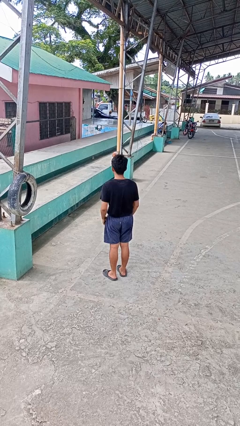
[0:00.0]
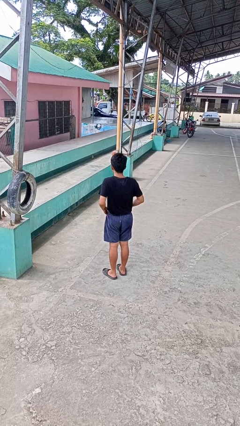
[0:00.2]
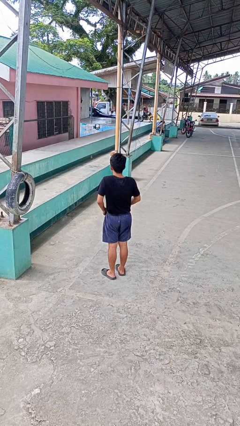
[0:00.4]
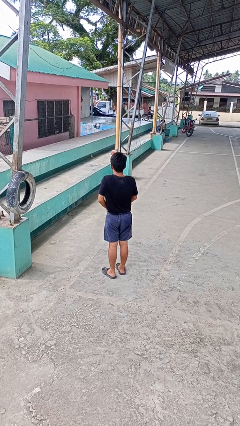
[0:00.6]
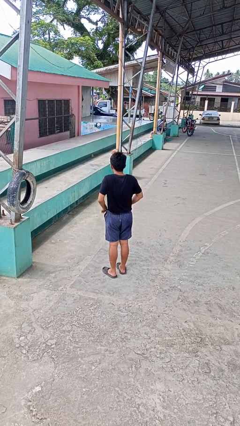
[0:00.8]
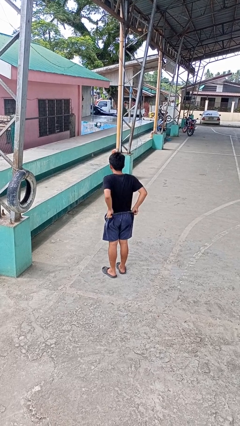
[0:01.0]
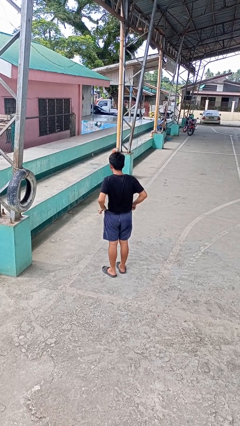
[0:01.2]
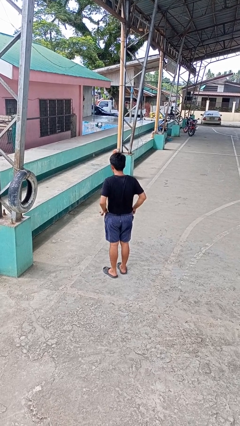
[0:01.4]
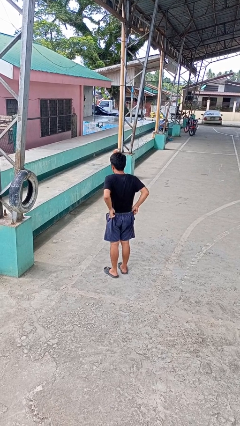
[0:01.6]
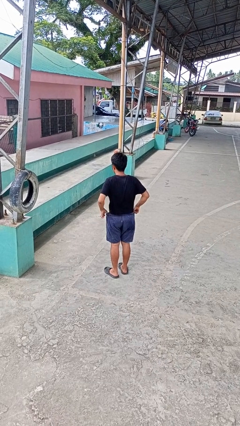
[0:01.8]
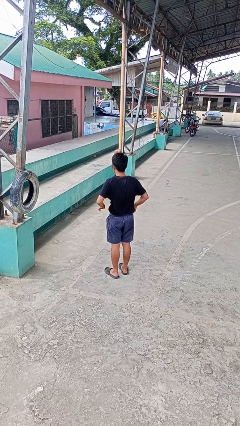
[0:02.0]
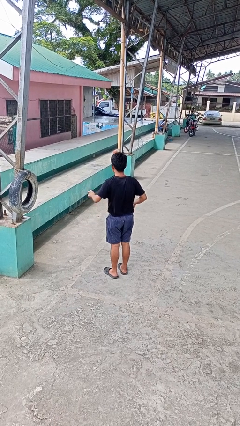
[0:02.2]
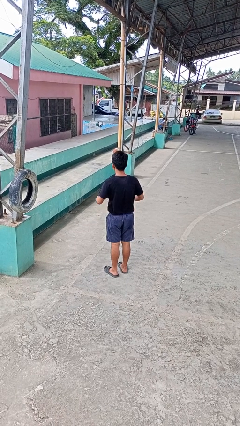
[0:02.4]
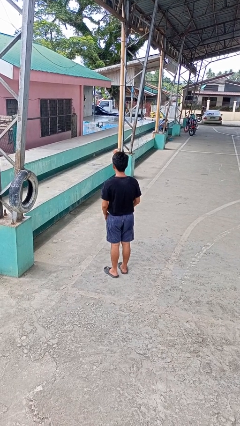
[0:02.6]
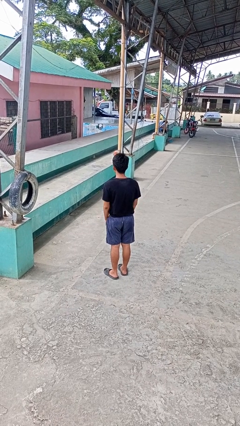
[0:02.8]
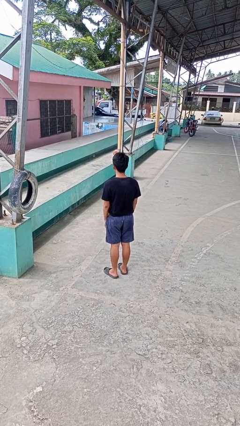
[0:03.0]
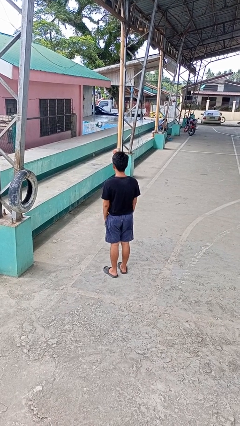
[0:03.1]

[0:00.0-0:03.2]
person hikes up pants

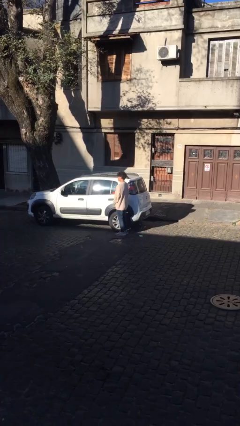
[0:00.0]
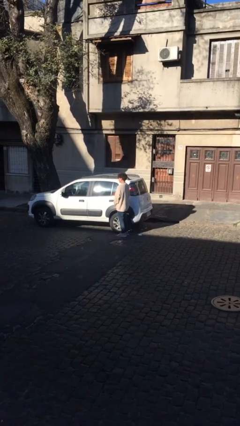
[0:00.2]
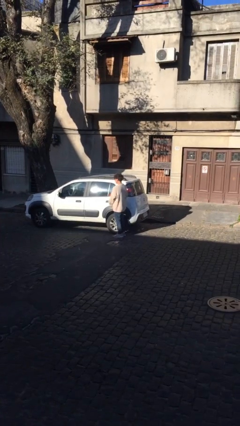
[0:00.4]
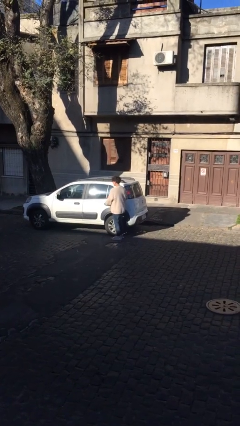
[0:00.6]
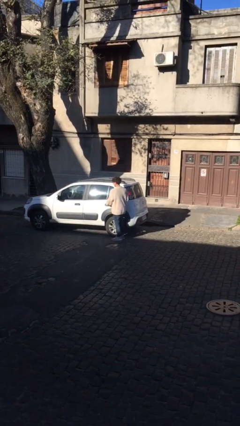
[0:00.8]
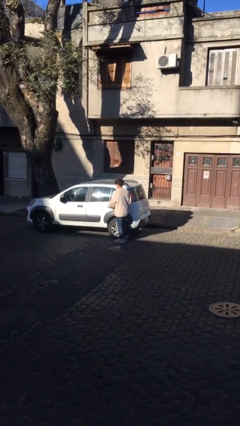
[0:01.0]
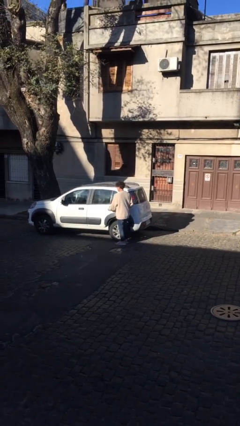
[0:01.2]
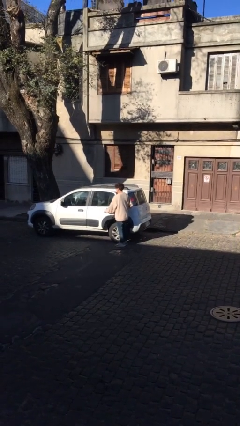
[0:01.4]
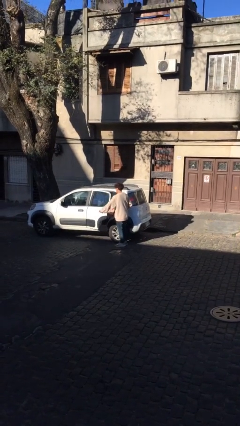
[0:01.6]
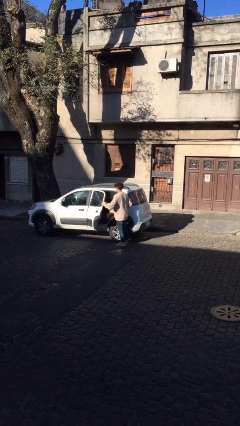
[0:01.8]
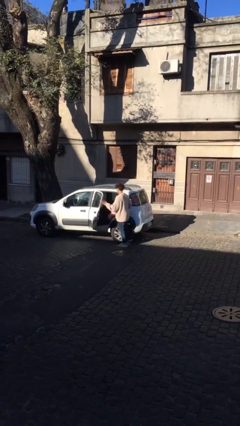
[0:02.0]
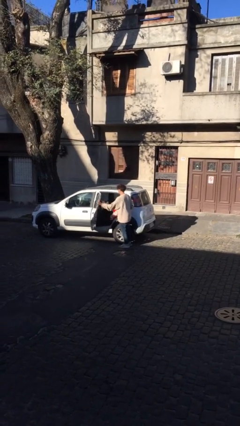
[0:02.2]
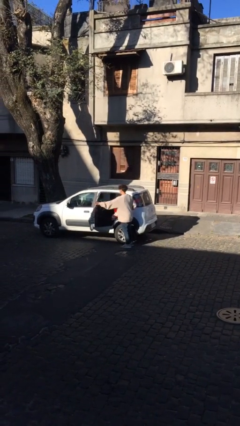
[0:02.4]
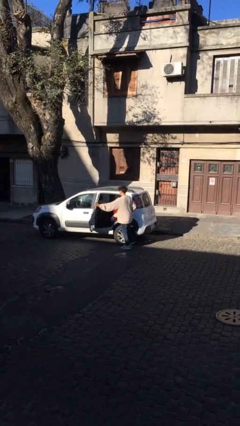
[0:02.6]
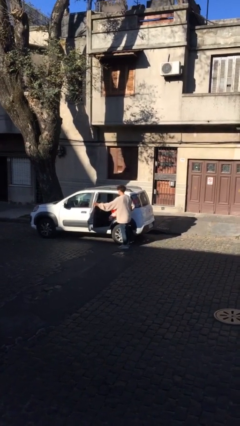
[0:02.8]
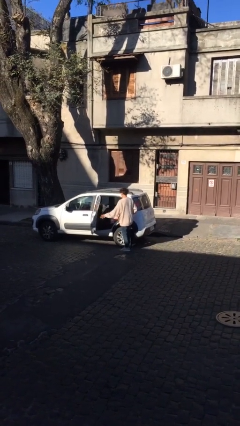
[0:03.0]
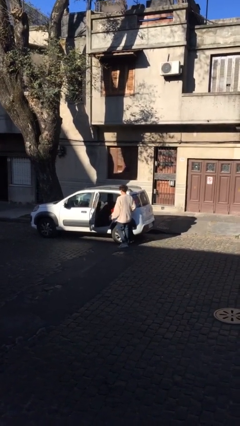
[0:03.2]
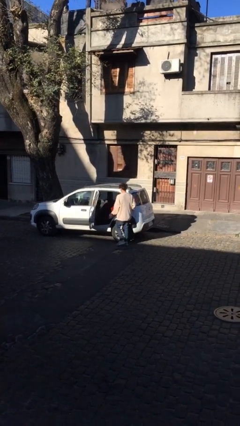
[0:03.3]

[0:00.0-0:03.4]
person opens car door

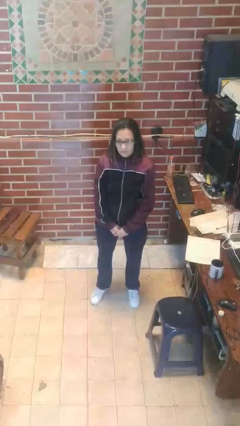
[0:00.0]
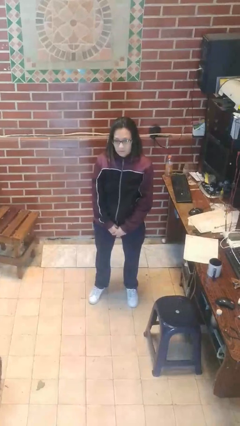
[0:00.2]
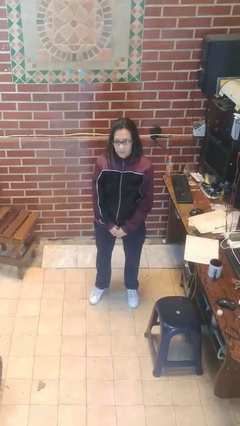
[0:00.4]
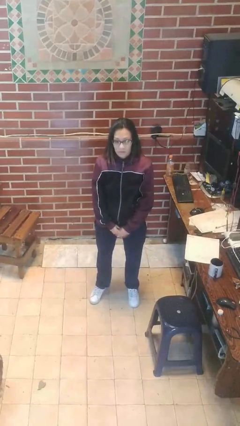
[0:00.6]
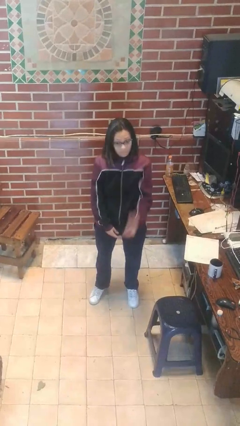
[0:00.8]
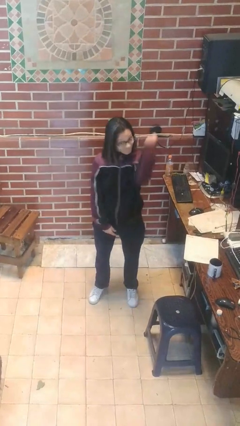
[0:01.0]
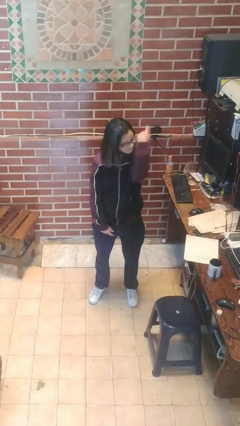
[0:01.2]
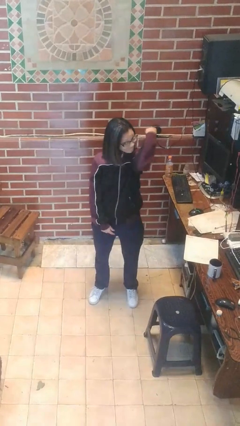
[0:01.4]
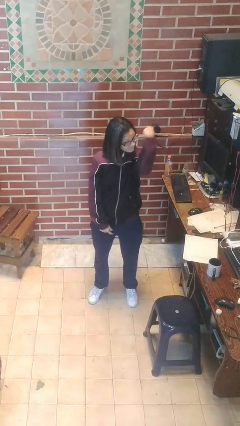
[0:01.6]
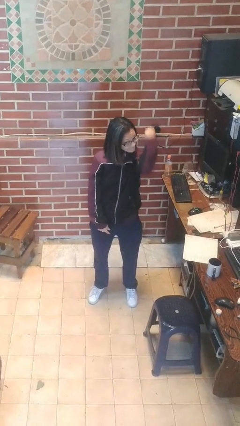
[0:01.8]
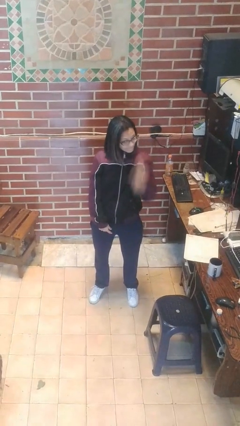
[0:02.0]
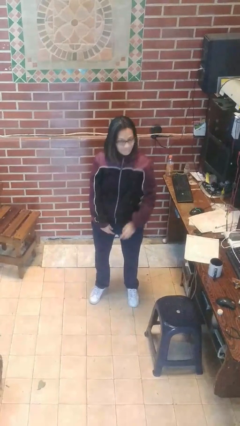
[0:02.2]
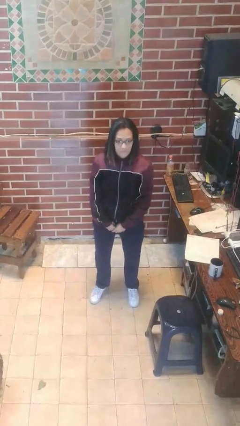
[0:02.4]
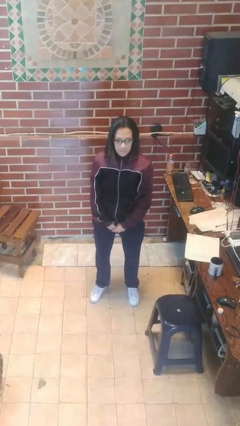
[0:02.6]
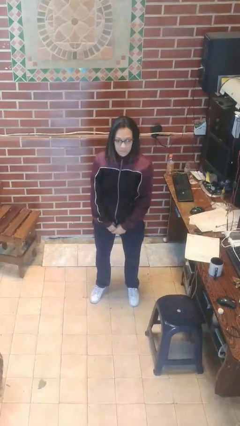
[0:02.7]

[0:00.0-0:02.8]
person gestures behind me

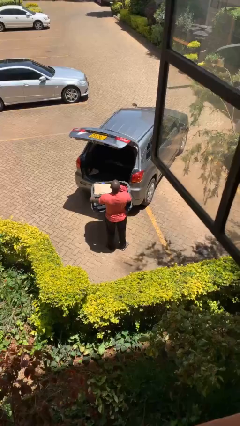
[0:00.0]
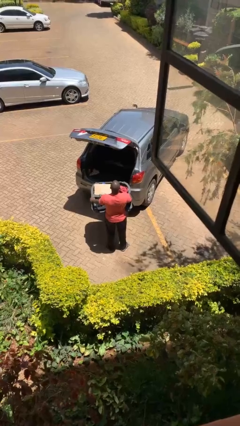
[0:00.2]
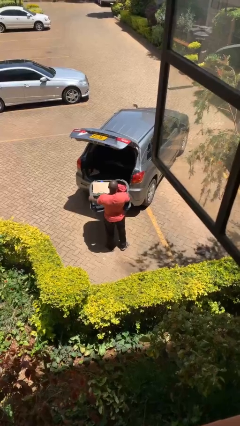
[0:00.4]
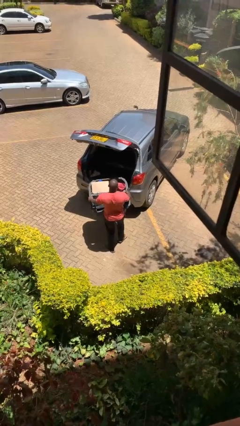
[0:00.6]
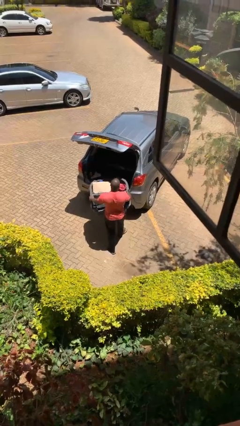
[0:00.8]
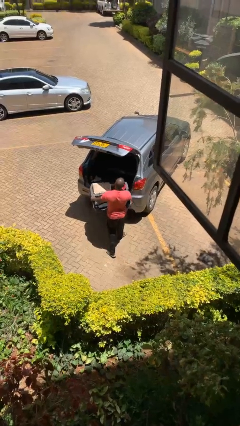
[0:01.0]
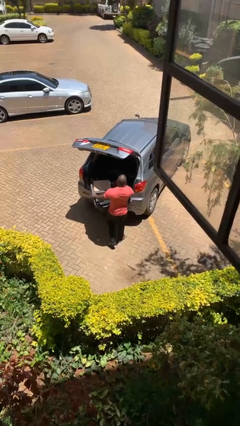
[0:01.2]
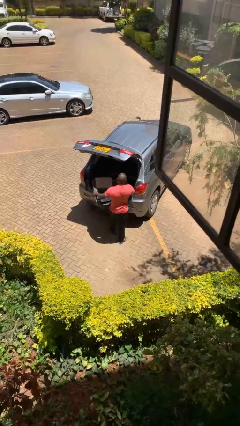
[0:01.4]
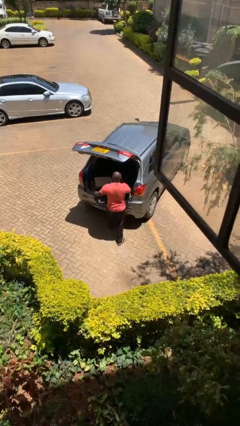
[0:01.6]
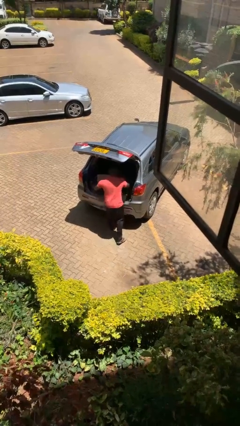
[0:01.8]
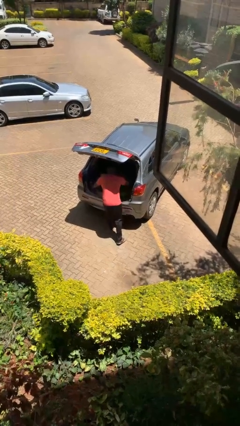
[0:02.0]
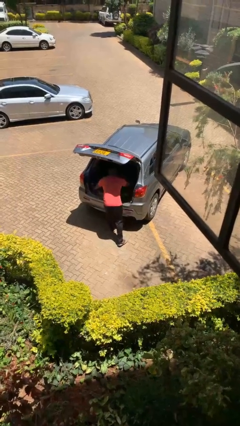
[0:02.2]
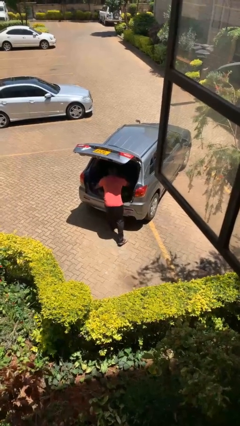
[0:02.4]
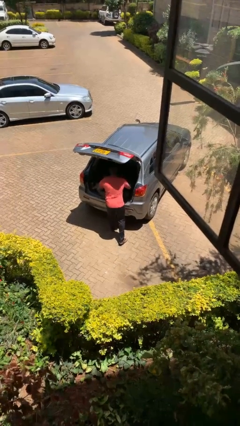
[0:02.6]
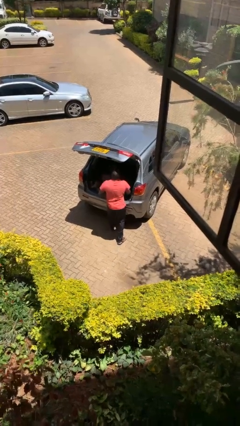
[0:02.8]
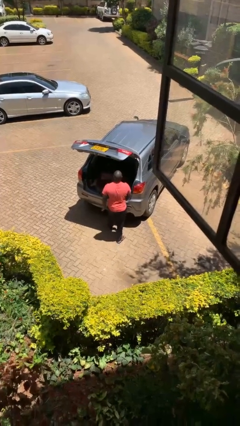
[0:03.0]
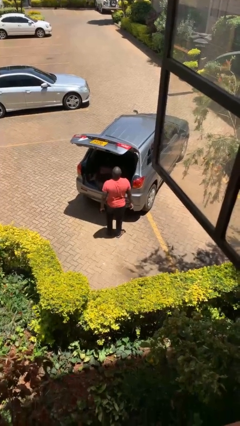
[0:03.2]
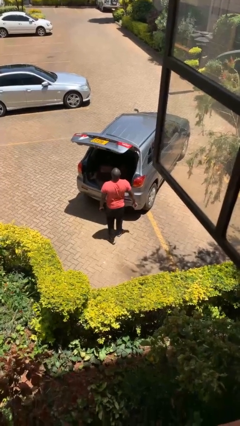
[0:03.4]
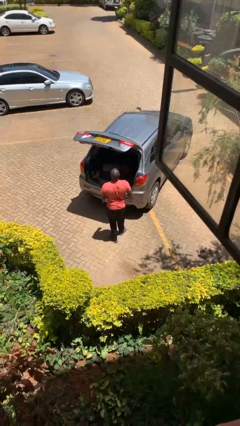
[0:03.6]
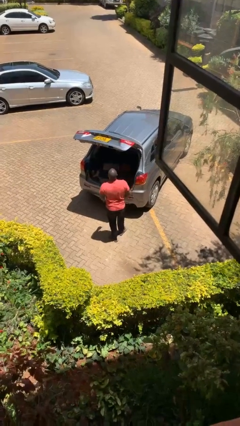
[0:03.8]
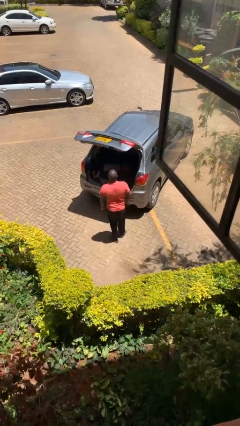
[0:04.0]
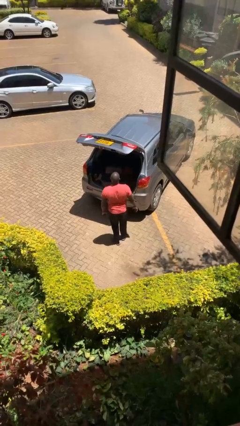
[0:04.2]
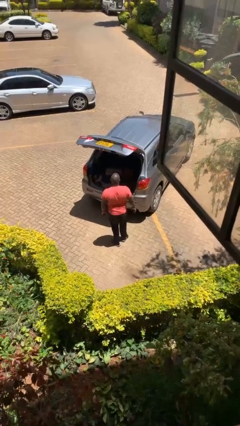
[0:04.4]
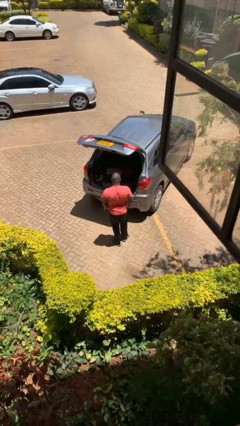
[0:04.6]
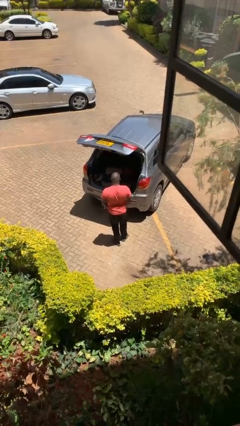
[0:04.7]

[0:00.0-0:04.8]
person loads car

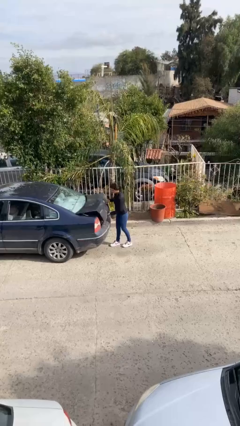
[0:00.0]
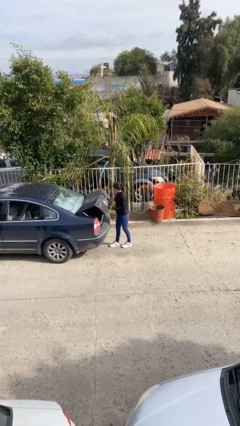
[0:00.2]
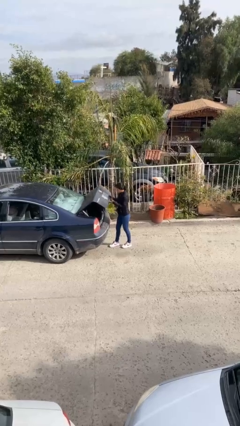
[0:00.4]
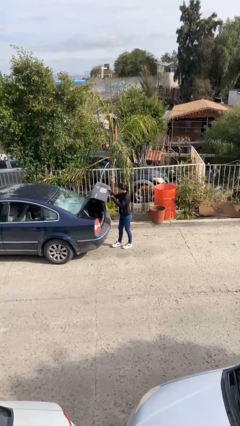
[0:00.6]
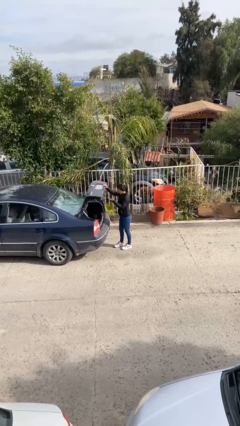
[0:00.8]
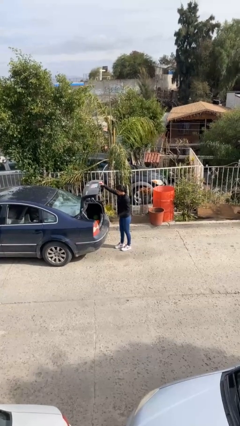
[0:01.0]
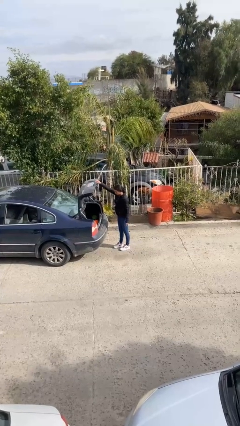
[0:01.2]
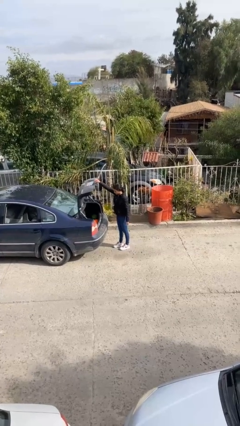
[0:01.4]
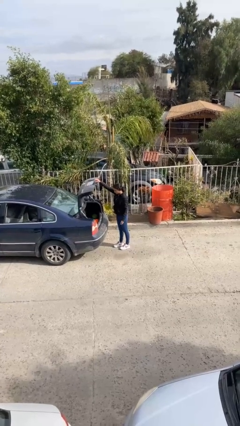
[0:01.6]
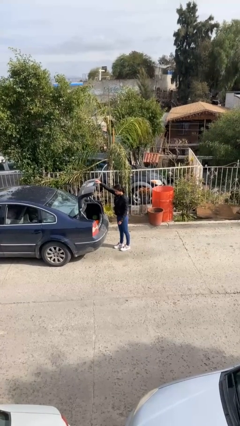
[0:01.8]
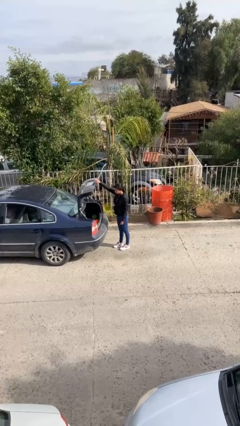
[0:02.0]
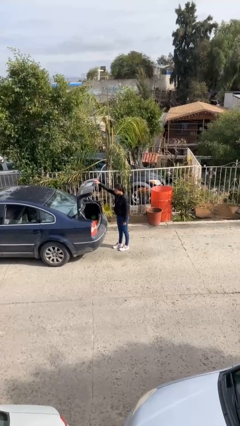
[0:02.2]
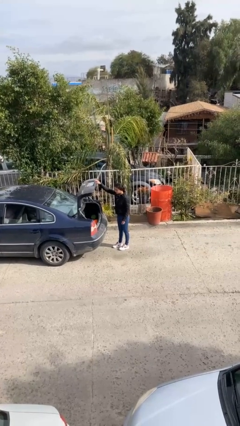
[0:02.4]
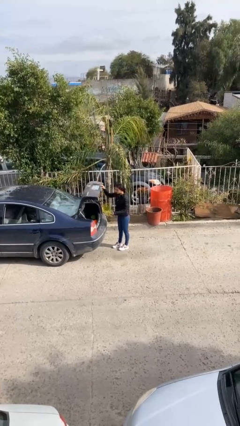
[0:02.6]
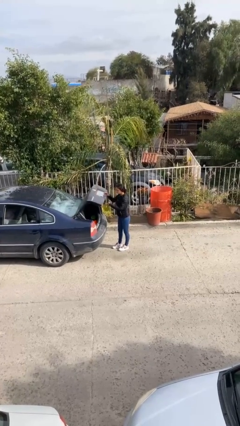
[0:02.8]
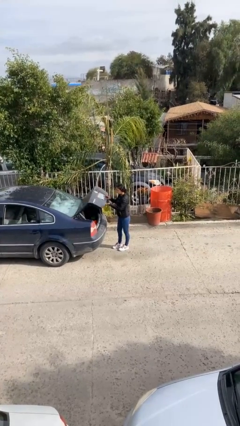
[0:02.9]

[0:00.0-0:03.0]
person opens car trunk

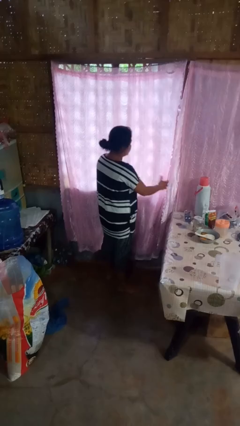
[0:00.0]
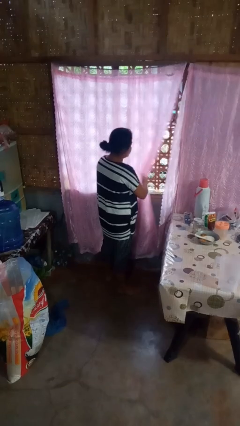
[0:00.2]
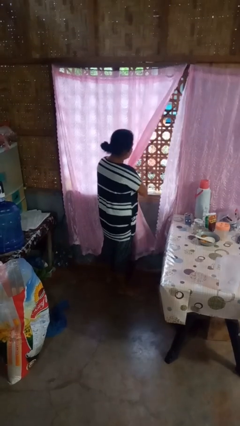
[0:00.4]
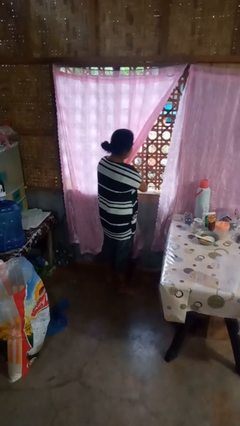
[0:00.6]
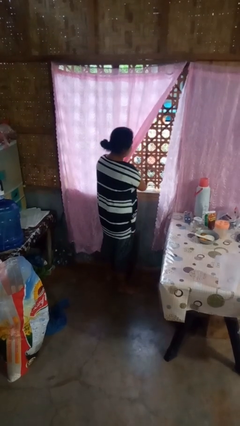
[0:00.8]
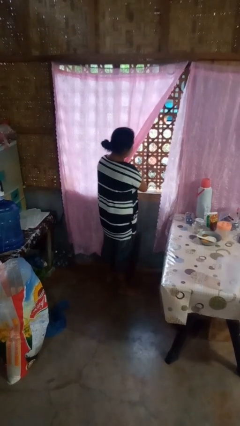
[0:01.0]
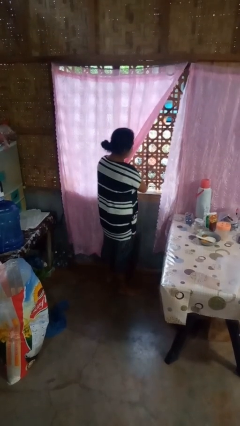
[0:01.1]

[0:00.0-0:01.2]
person opens curtains
